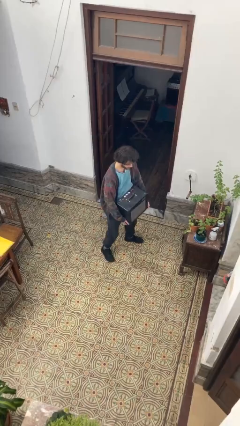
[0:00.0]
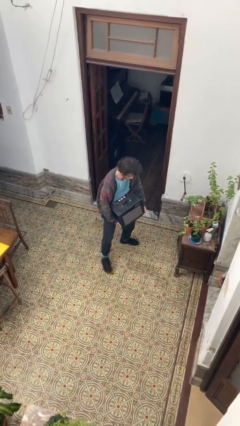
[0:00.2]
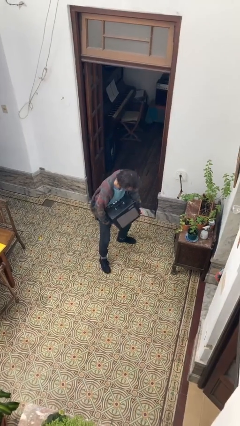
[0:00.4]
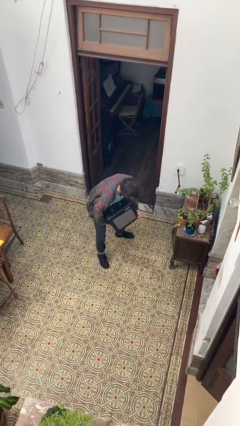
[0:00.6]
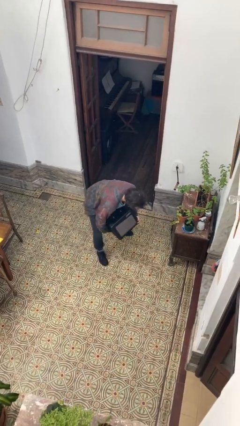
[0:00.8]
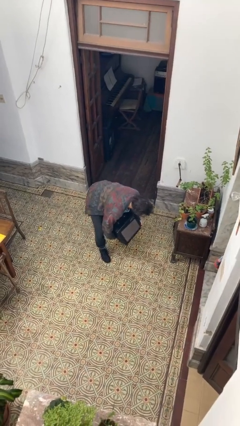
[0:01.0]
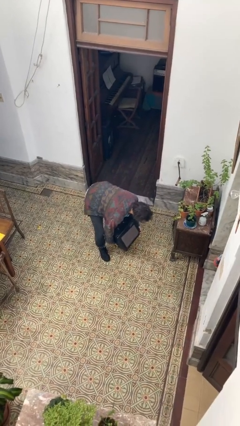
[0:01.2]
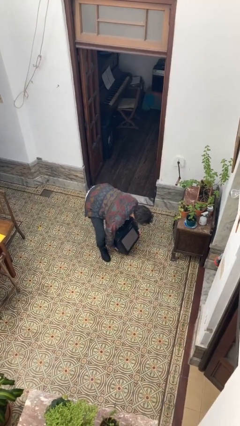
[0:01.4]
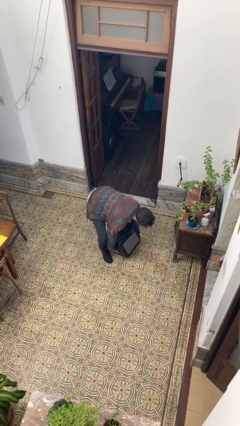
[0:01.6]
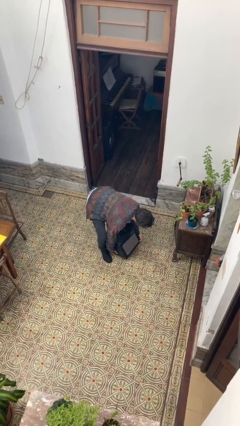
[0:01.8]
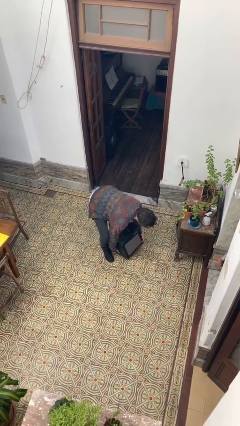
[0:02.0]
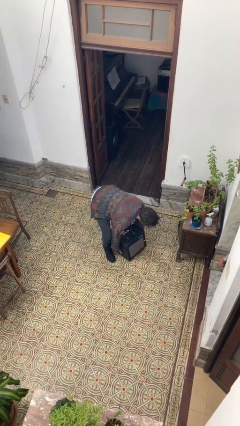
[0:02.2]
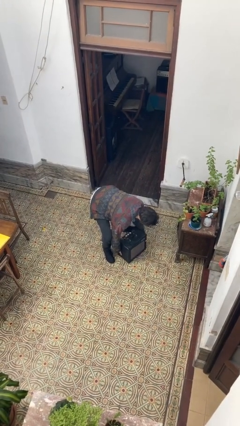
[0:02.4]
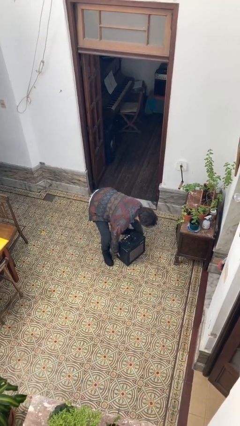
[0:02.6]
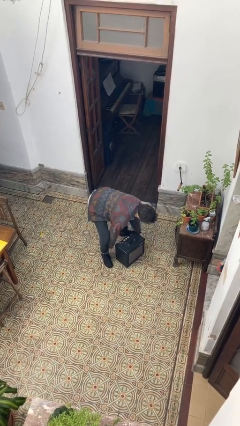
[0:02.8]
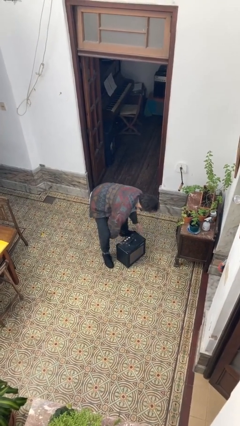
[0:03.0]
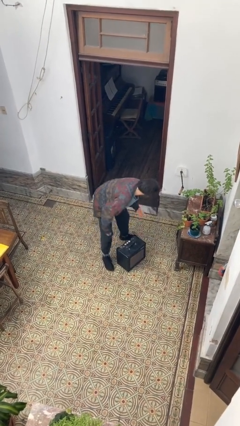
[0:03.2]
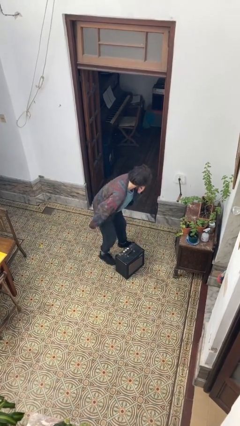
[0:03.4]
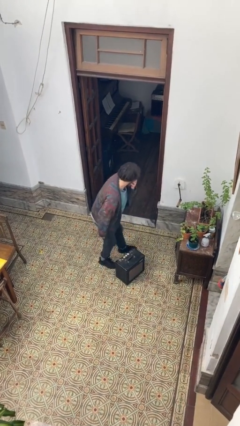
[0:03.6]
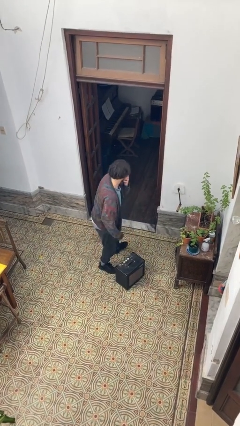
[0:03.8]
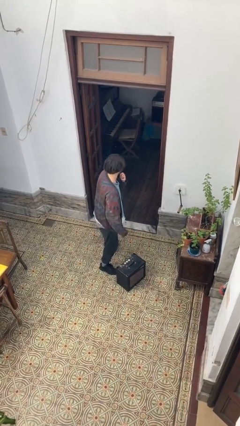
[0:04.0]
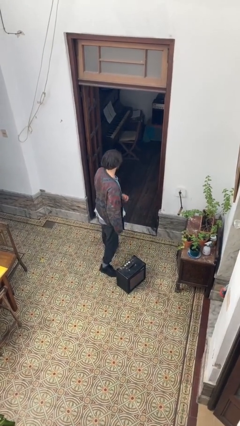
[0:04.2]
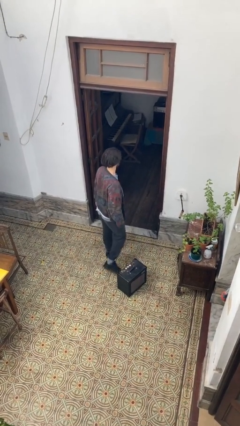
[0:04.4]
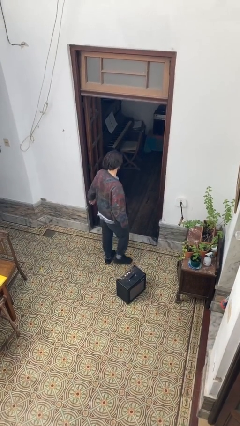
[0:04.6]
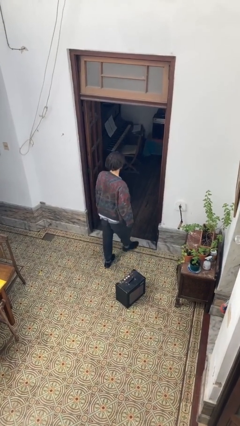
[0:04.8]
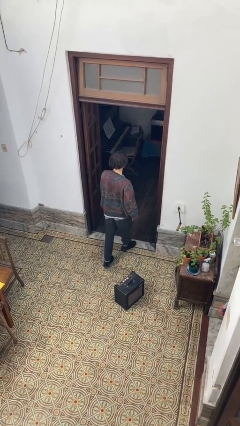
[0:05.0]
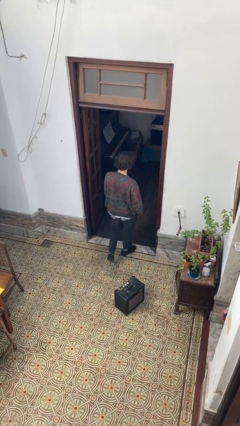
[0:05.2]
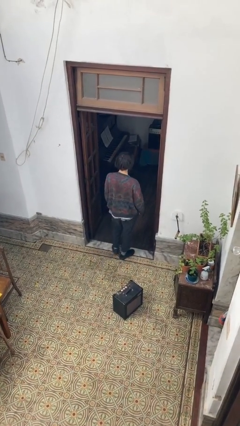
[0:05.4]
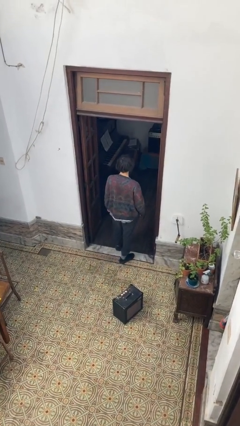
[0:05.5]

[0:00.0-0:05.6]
person puts down object on floor

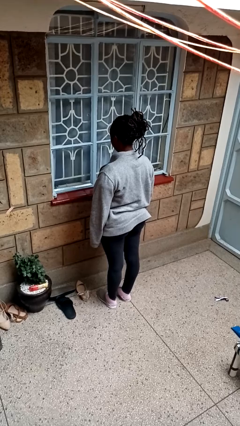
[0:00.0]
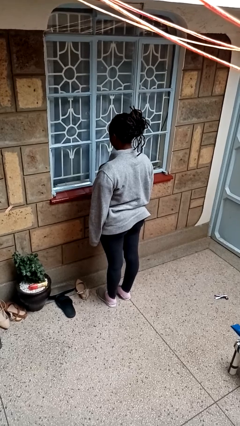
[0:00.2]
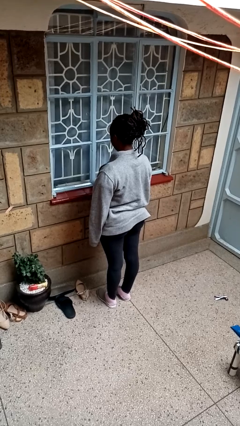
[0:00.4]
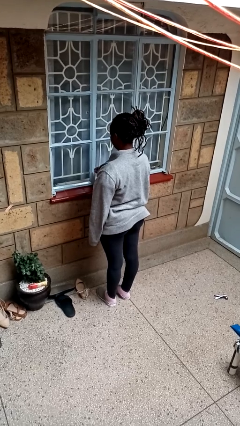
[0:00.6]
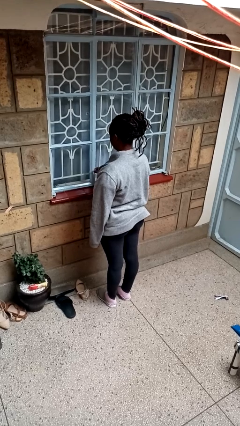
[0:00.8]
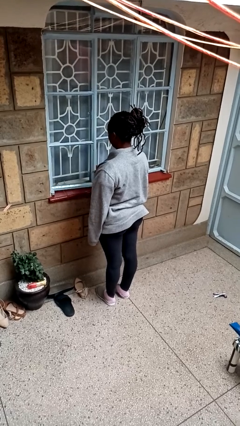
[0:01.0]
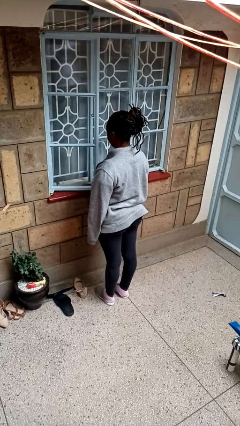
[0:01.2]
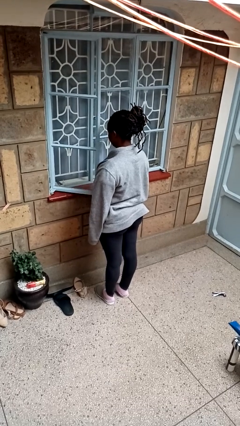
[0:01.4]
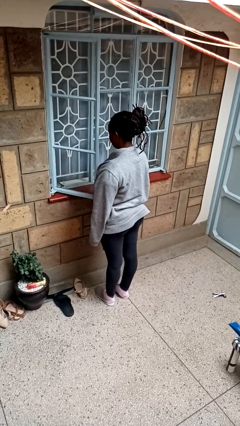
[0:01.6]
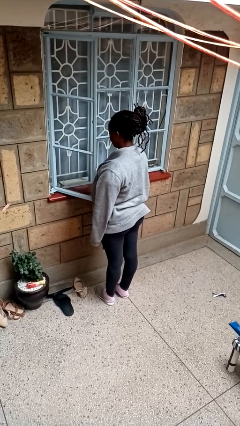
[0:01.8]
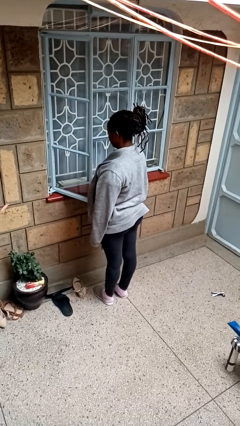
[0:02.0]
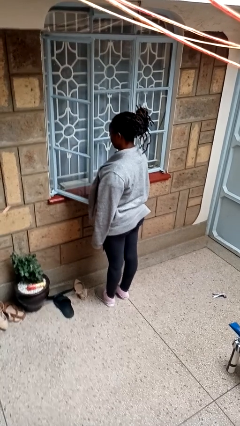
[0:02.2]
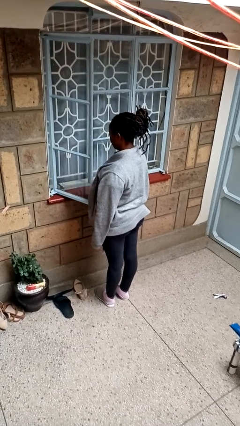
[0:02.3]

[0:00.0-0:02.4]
person opens home window

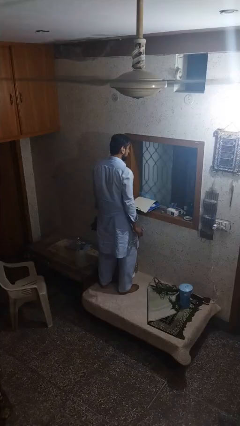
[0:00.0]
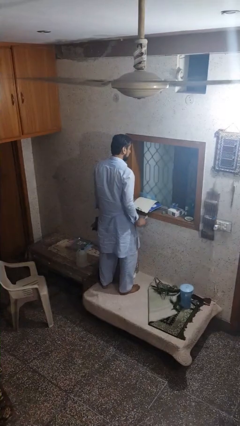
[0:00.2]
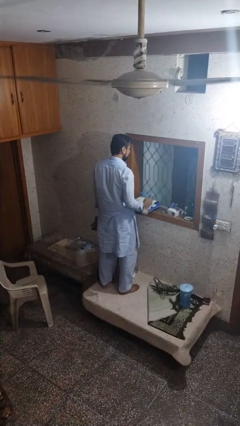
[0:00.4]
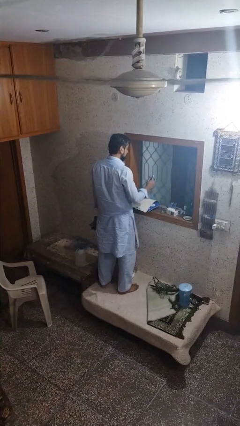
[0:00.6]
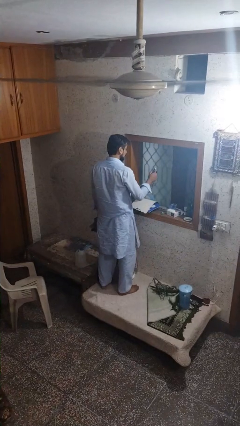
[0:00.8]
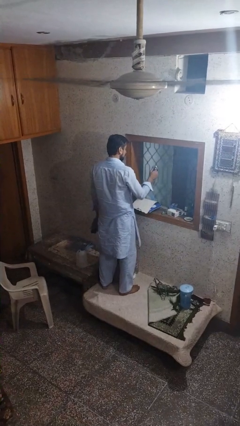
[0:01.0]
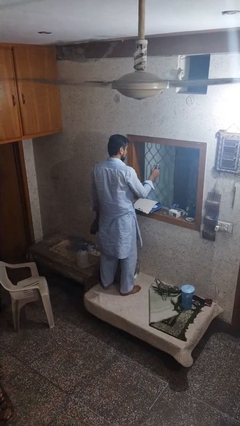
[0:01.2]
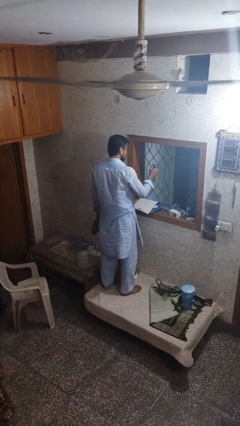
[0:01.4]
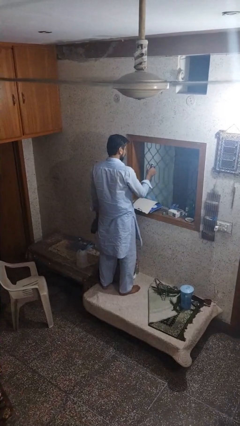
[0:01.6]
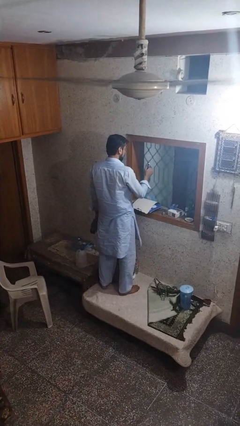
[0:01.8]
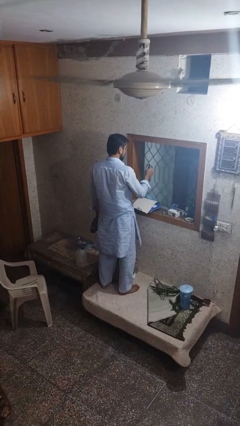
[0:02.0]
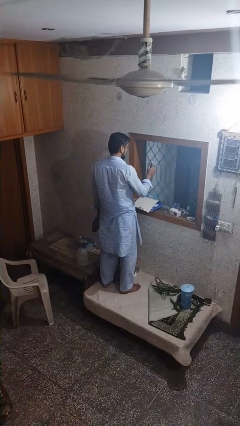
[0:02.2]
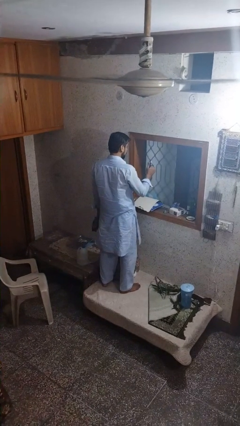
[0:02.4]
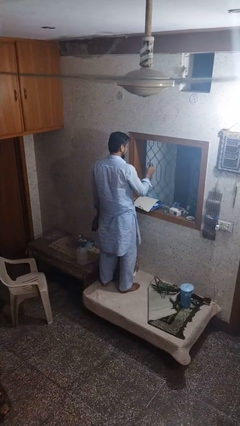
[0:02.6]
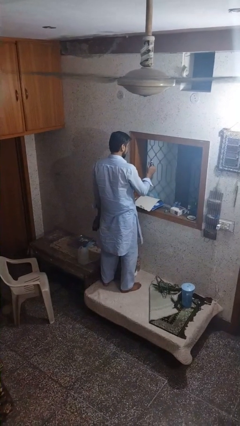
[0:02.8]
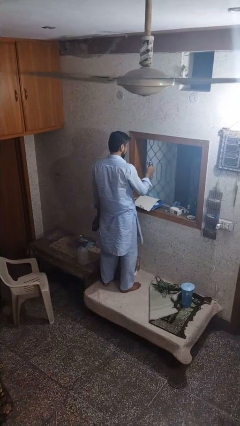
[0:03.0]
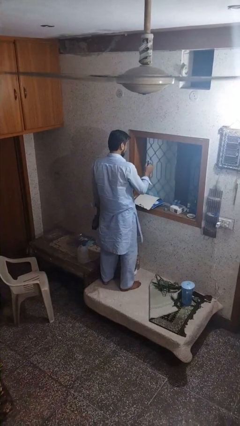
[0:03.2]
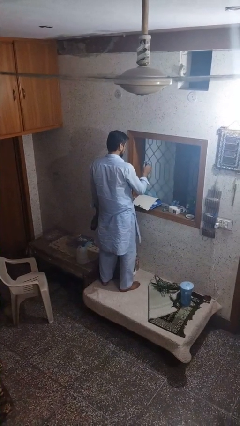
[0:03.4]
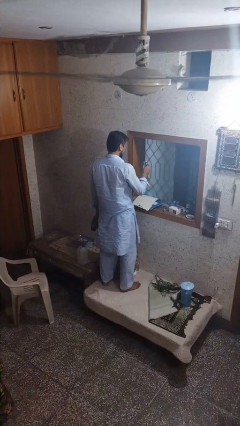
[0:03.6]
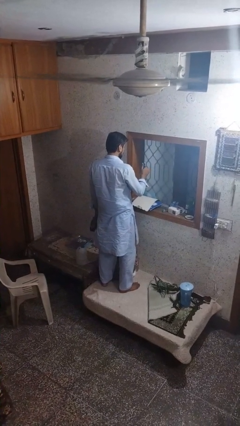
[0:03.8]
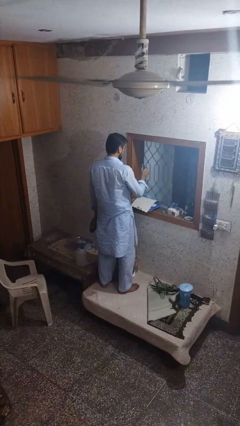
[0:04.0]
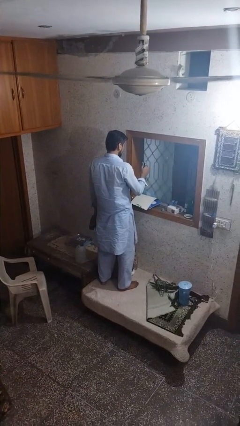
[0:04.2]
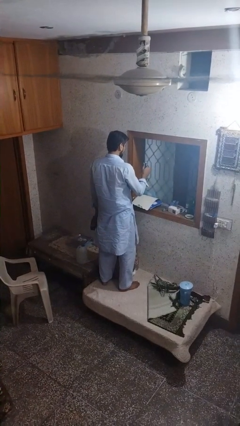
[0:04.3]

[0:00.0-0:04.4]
person sprays from bottle

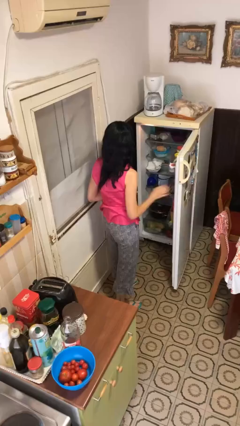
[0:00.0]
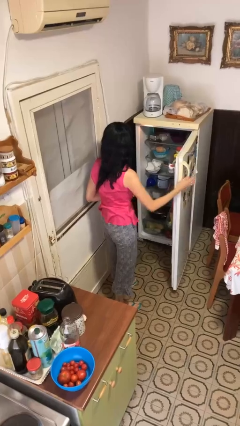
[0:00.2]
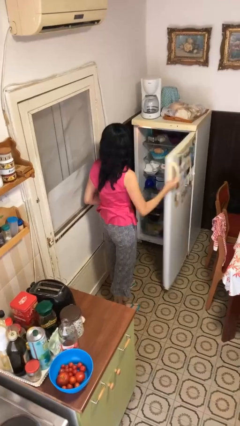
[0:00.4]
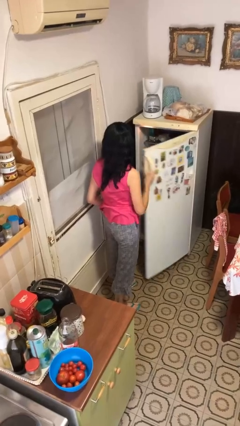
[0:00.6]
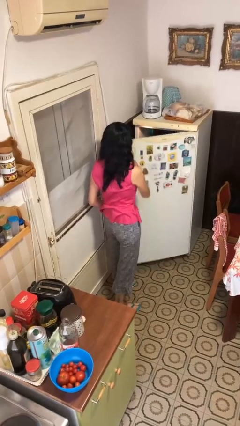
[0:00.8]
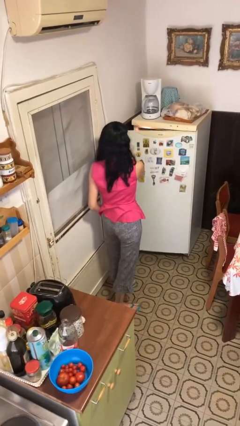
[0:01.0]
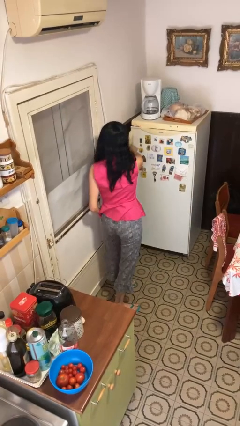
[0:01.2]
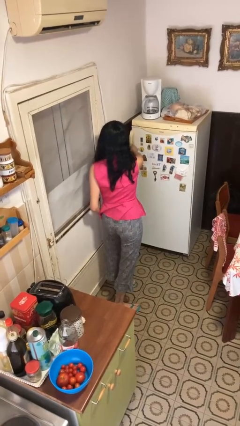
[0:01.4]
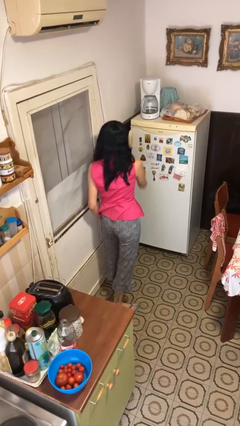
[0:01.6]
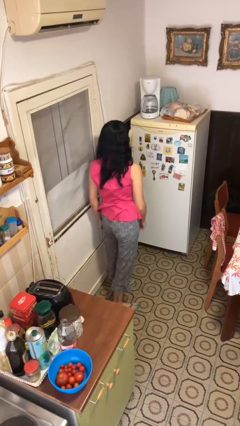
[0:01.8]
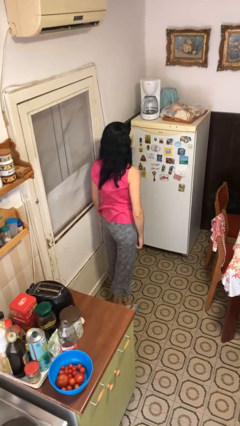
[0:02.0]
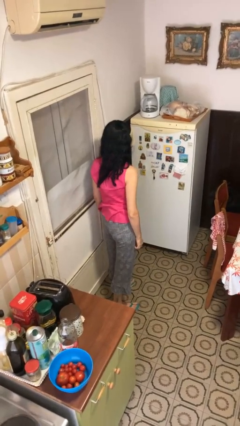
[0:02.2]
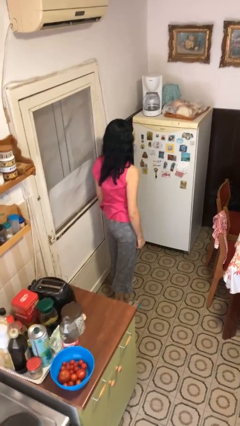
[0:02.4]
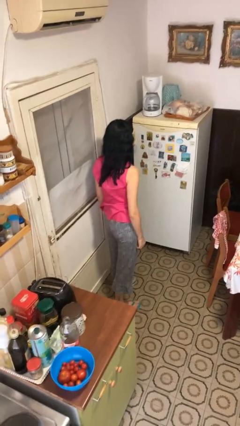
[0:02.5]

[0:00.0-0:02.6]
person closes refrigerator

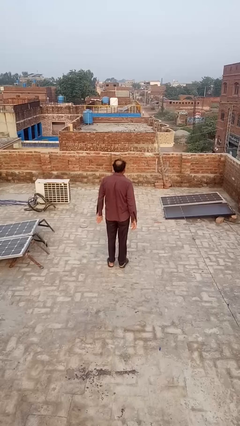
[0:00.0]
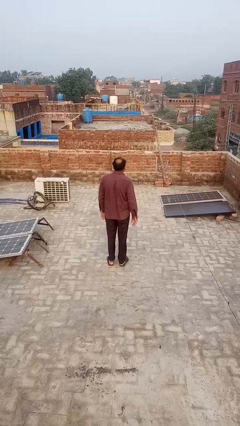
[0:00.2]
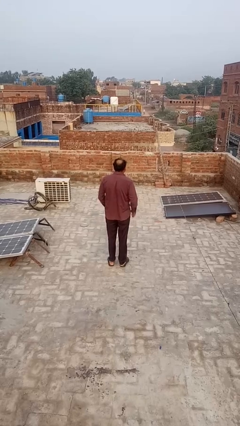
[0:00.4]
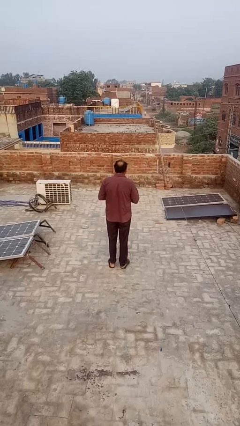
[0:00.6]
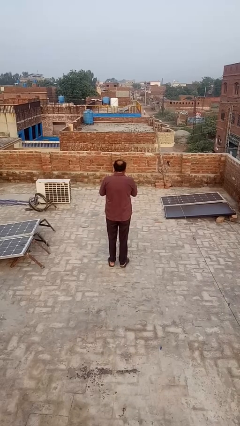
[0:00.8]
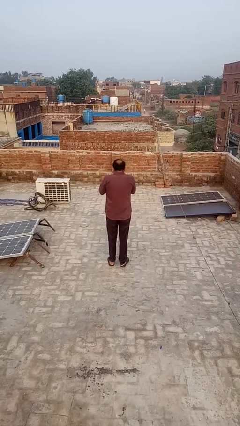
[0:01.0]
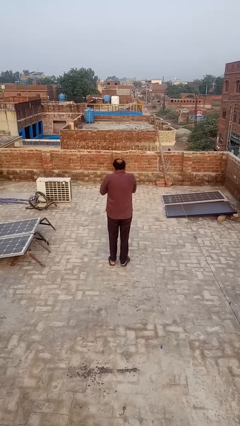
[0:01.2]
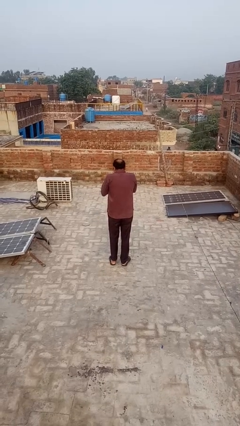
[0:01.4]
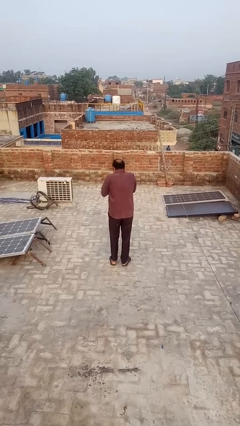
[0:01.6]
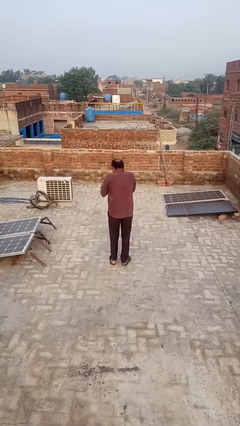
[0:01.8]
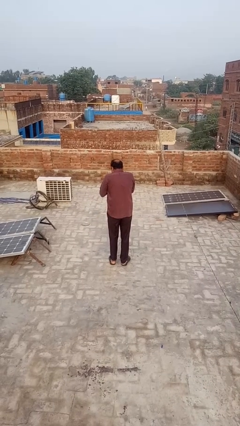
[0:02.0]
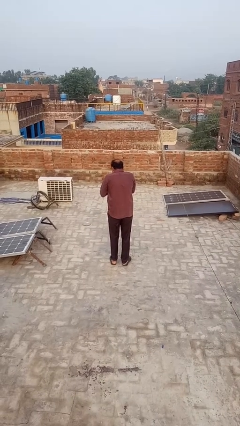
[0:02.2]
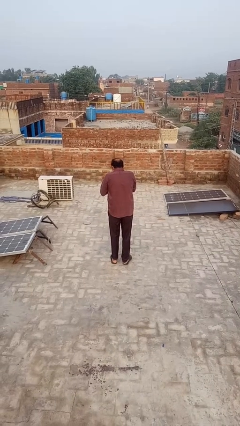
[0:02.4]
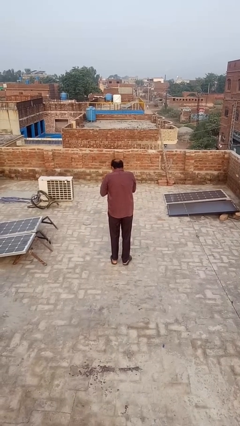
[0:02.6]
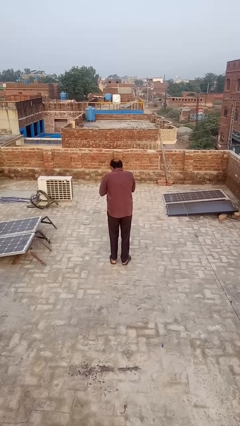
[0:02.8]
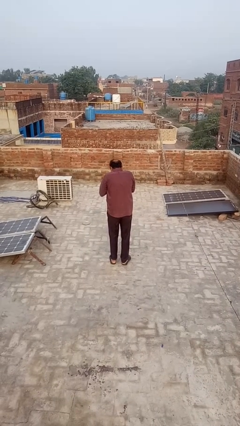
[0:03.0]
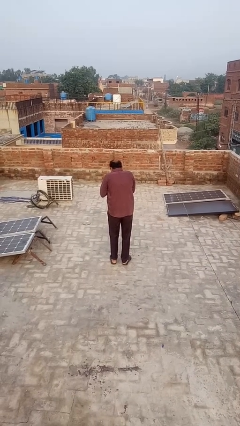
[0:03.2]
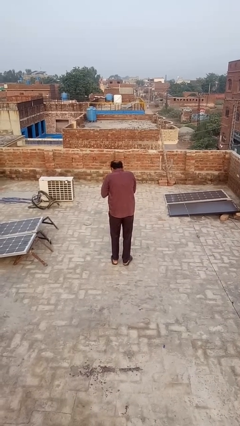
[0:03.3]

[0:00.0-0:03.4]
person blows into hands
